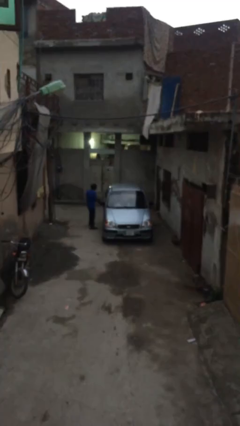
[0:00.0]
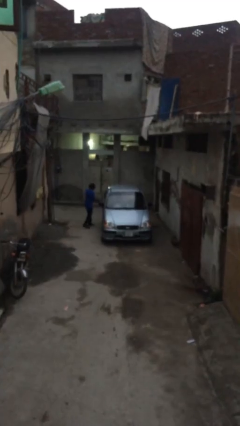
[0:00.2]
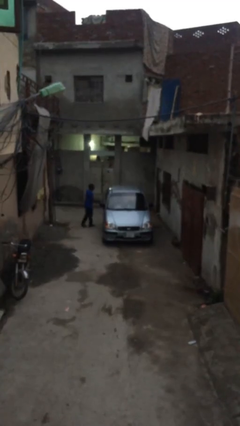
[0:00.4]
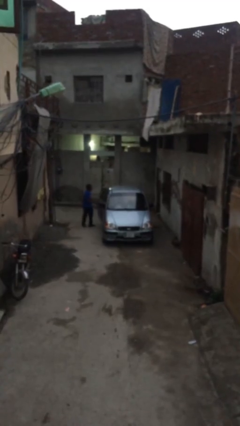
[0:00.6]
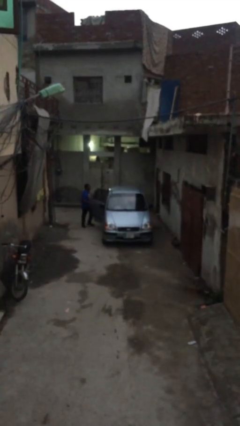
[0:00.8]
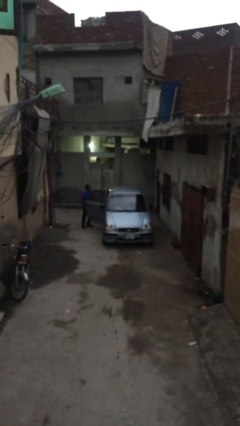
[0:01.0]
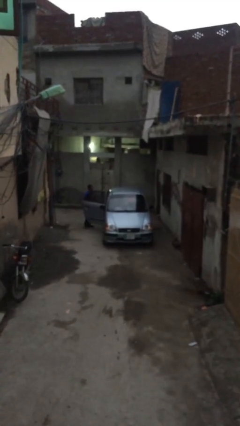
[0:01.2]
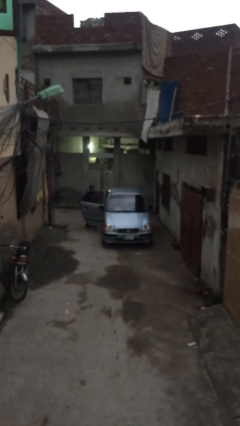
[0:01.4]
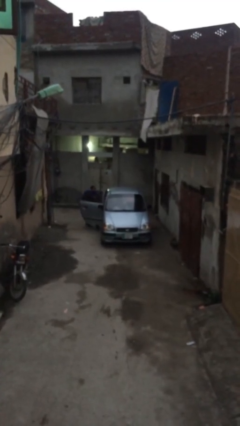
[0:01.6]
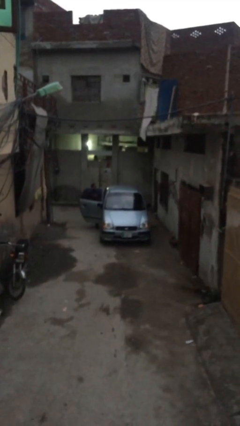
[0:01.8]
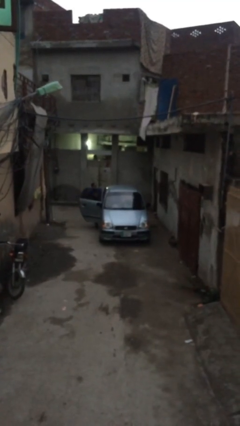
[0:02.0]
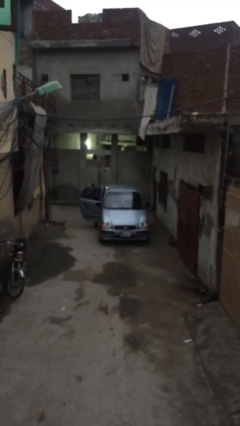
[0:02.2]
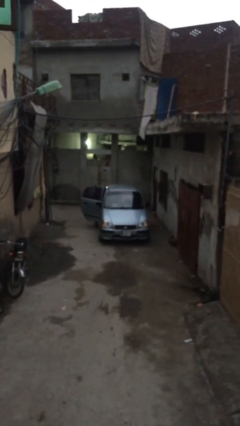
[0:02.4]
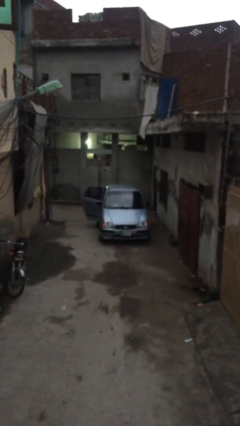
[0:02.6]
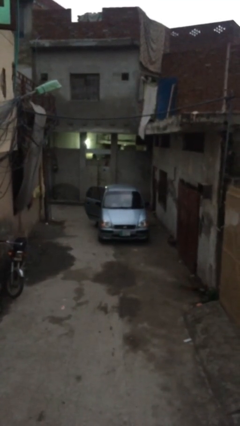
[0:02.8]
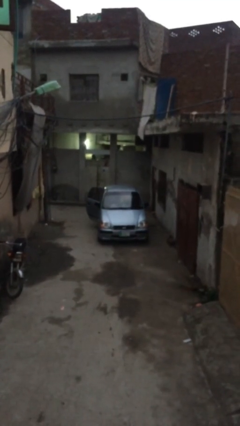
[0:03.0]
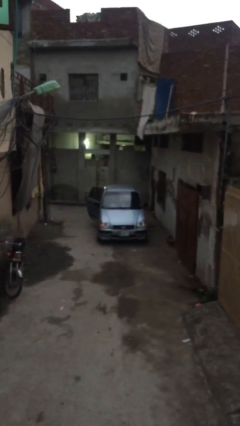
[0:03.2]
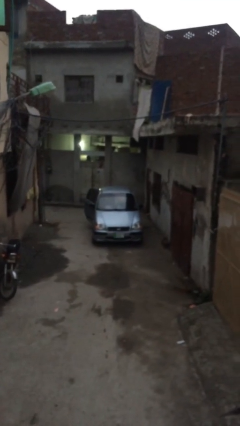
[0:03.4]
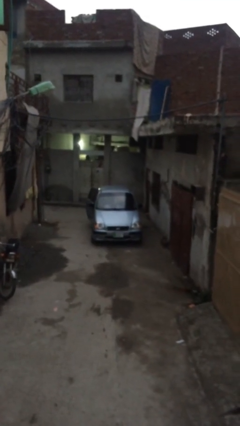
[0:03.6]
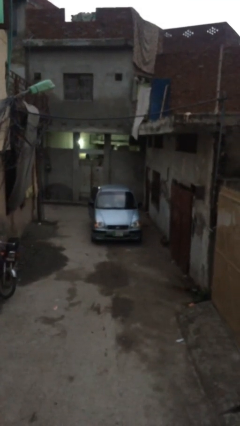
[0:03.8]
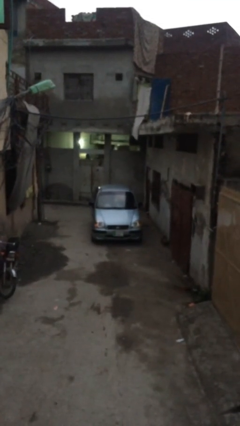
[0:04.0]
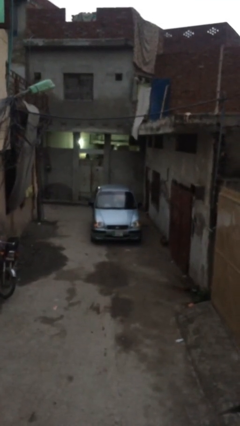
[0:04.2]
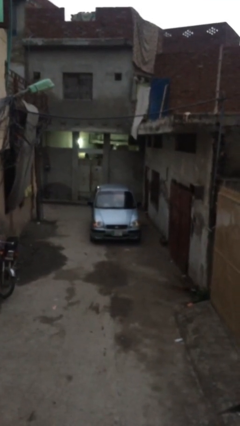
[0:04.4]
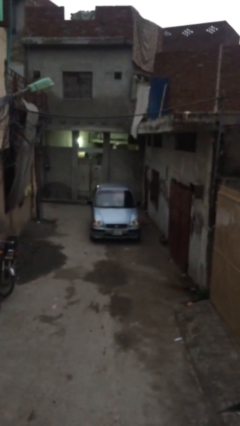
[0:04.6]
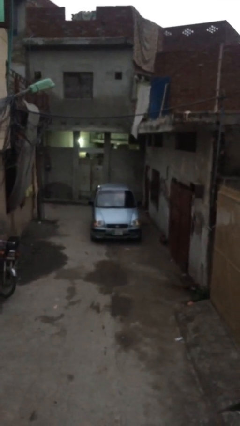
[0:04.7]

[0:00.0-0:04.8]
car picks up person

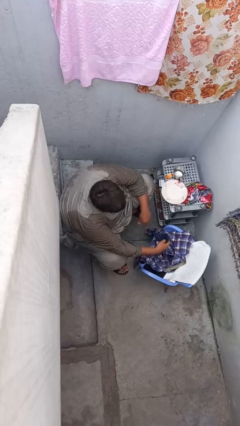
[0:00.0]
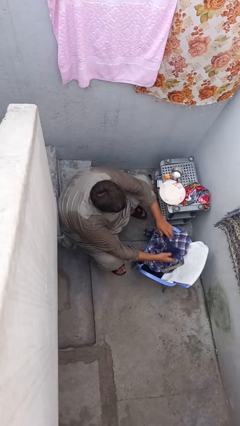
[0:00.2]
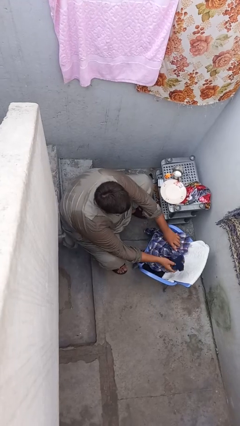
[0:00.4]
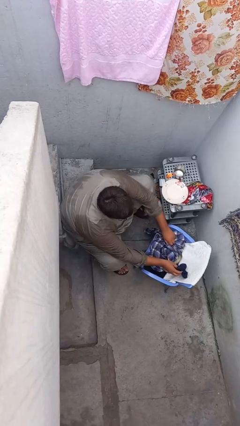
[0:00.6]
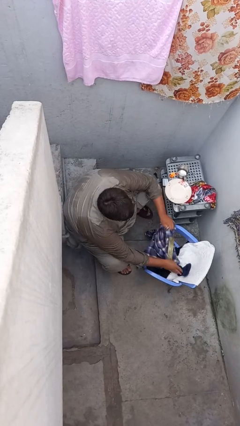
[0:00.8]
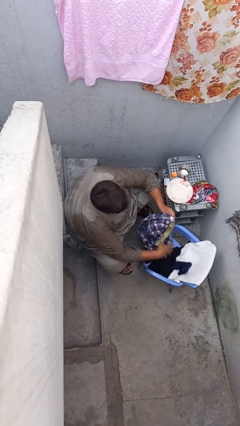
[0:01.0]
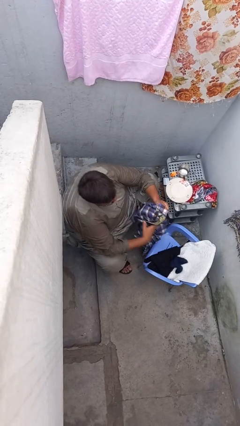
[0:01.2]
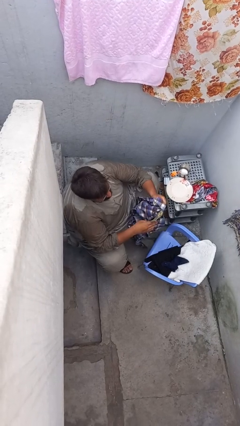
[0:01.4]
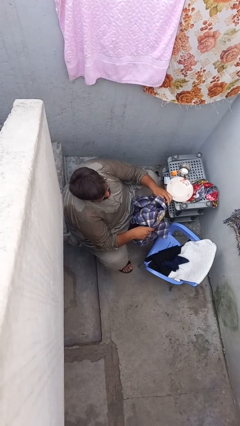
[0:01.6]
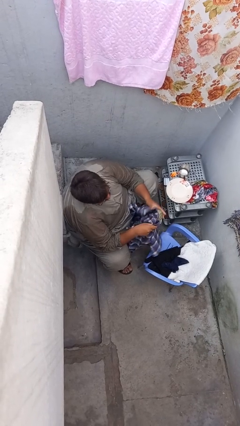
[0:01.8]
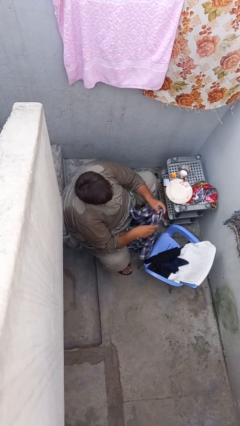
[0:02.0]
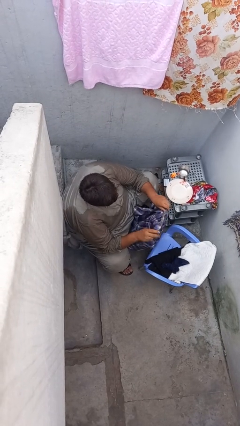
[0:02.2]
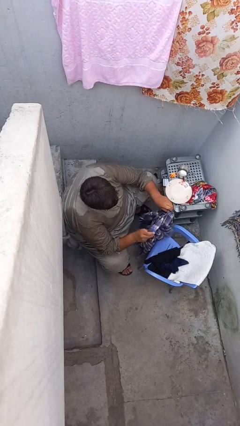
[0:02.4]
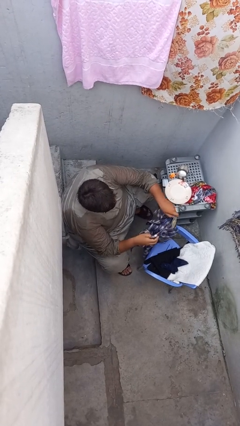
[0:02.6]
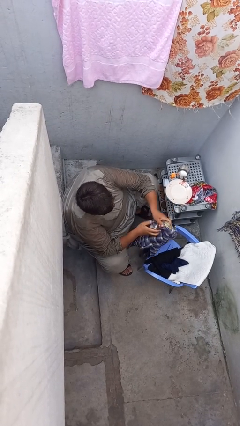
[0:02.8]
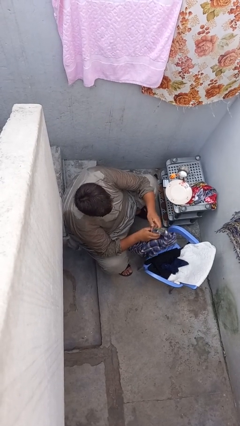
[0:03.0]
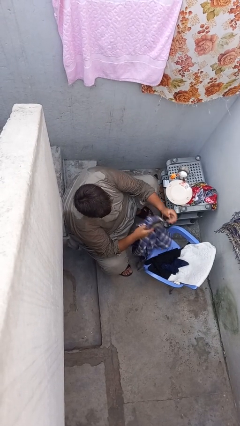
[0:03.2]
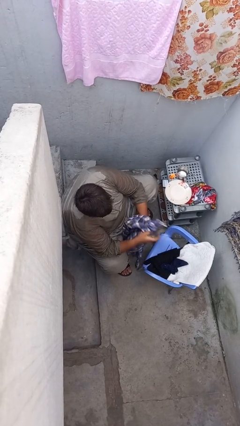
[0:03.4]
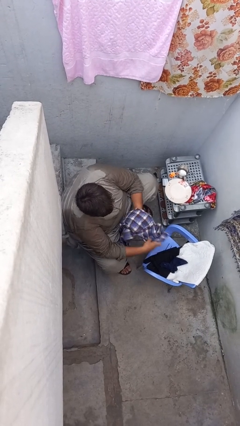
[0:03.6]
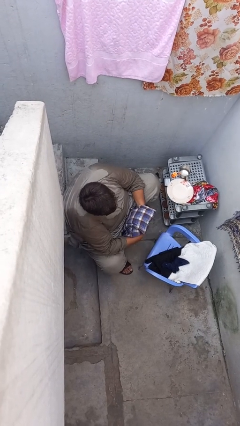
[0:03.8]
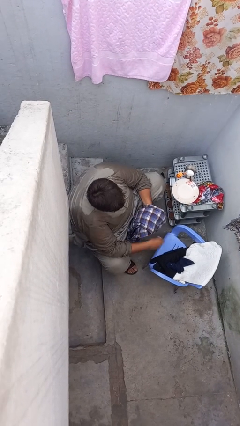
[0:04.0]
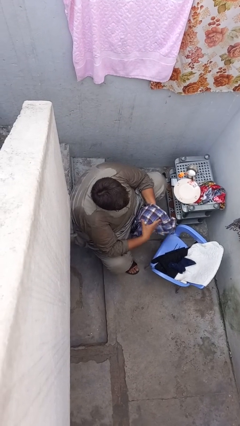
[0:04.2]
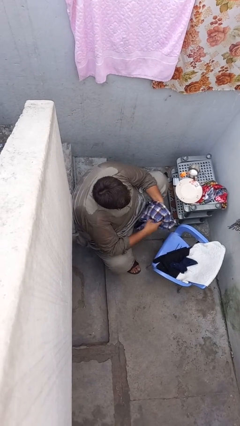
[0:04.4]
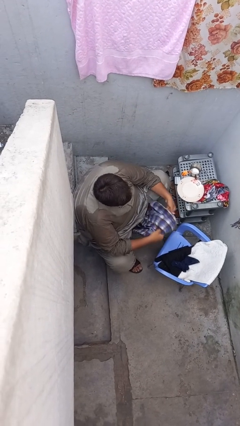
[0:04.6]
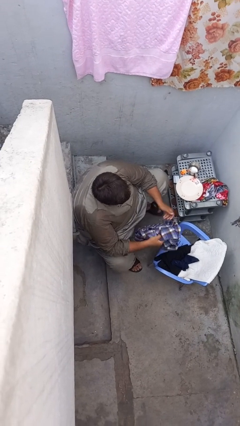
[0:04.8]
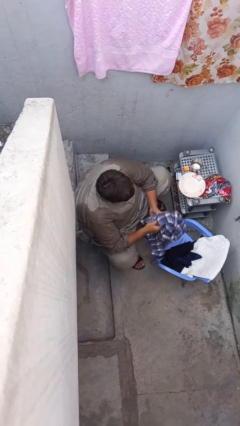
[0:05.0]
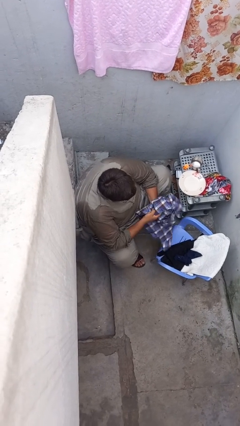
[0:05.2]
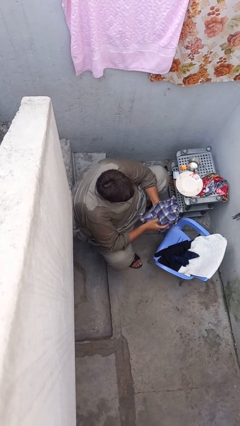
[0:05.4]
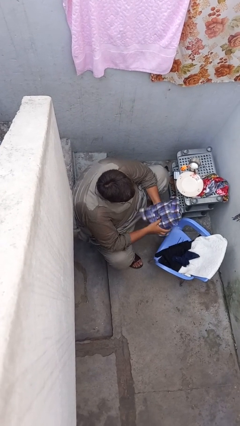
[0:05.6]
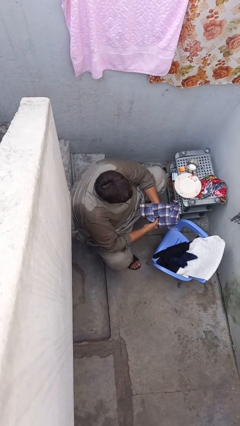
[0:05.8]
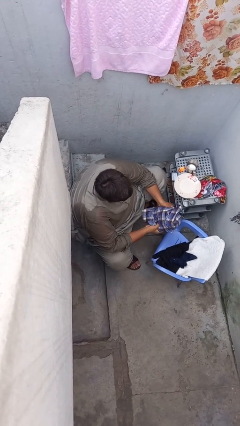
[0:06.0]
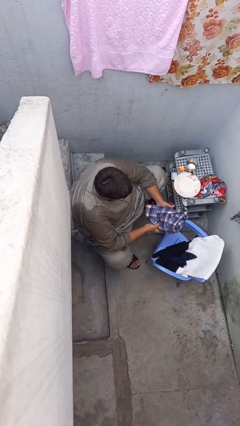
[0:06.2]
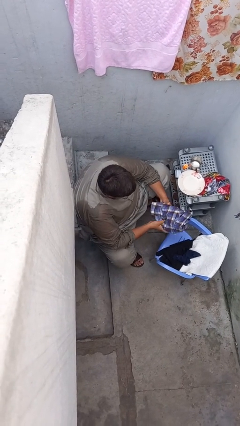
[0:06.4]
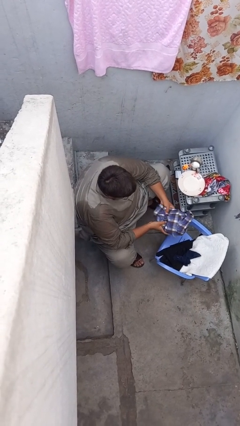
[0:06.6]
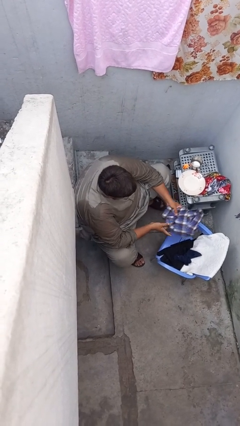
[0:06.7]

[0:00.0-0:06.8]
person folds shirt

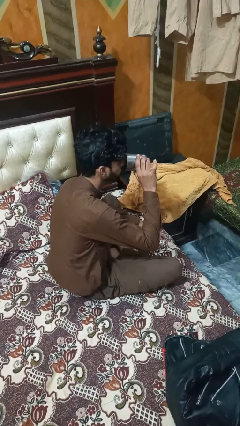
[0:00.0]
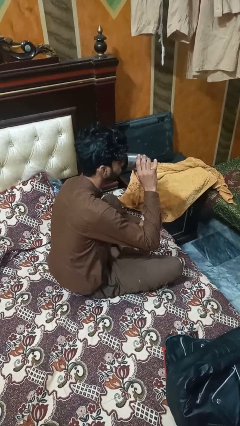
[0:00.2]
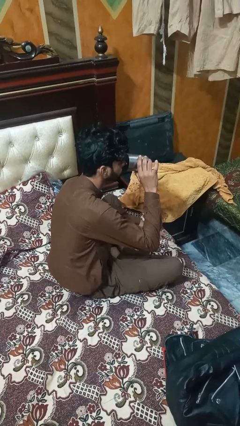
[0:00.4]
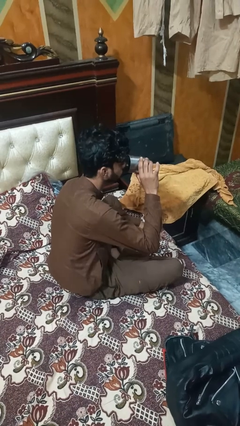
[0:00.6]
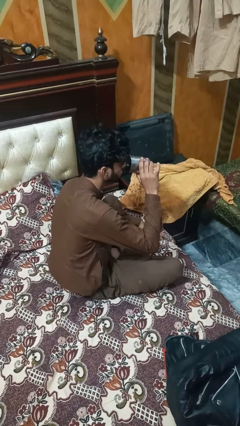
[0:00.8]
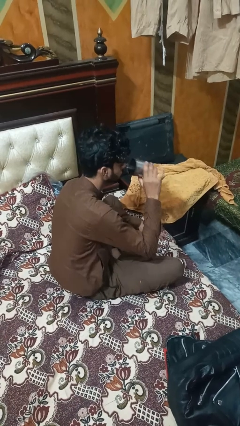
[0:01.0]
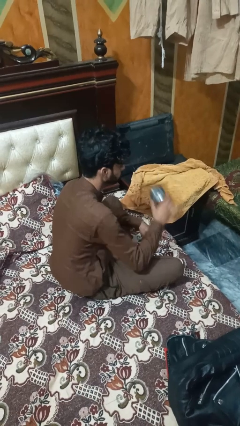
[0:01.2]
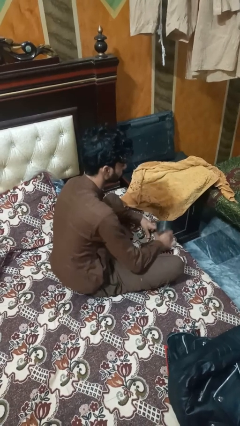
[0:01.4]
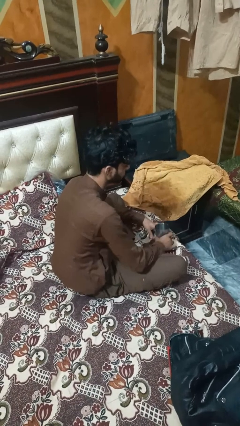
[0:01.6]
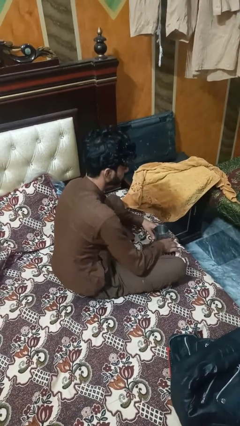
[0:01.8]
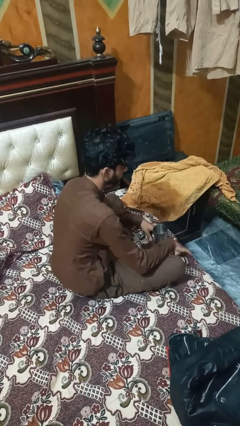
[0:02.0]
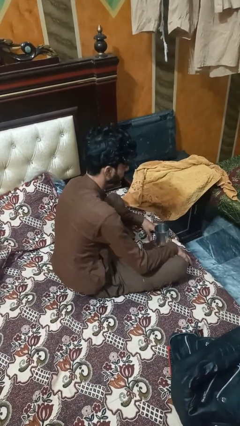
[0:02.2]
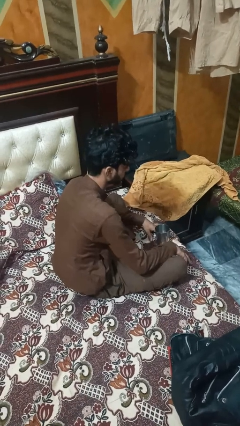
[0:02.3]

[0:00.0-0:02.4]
person puts down object on table

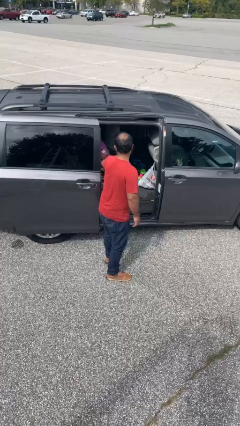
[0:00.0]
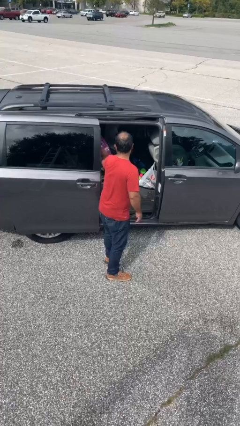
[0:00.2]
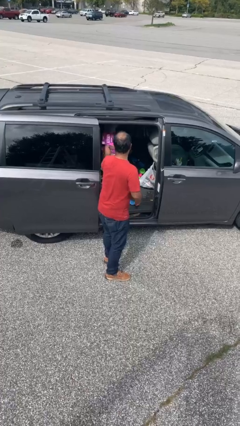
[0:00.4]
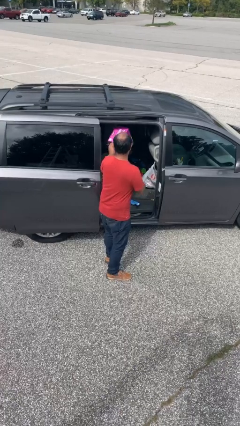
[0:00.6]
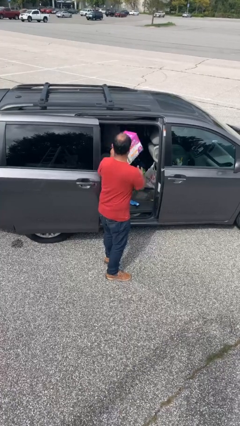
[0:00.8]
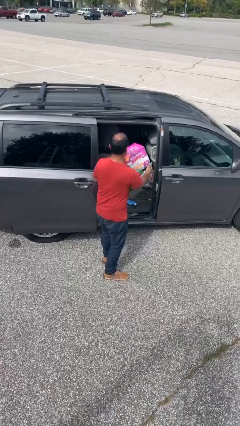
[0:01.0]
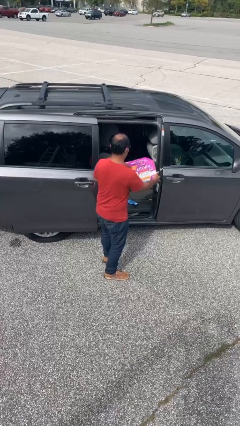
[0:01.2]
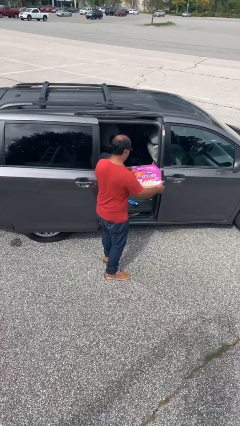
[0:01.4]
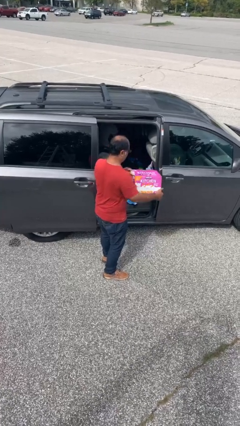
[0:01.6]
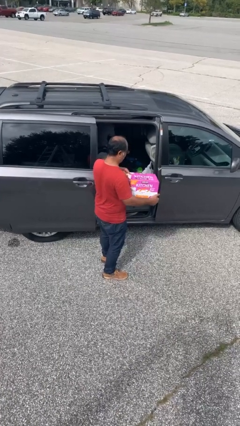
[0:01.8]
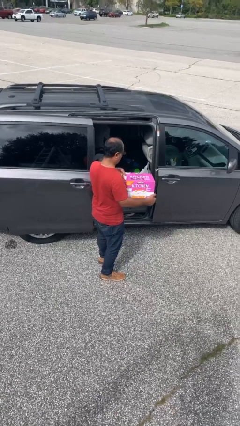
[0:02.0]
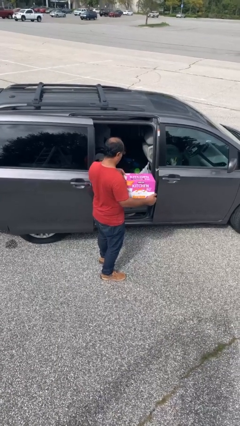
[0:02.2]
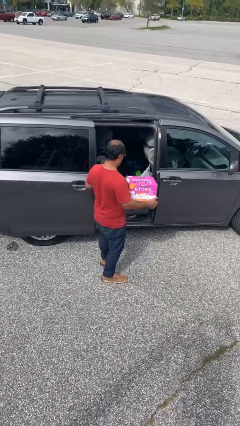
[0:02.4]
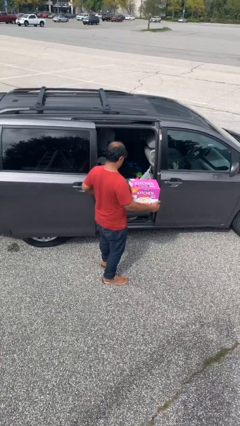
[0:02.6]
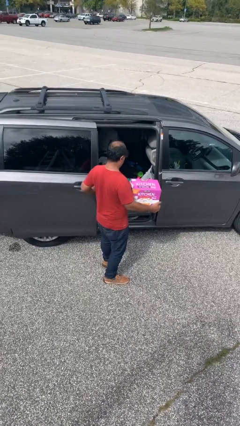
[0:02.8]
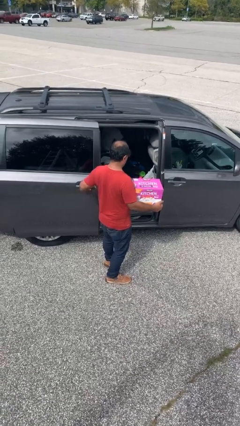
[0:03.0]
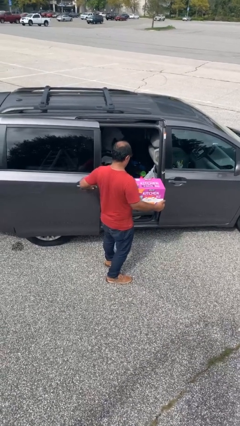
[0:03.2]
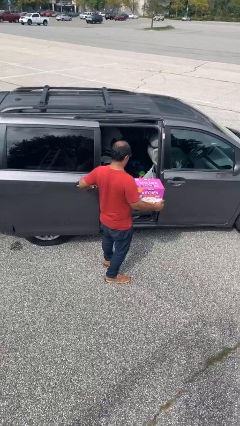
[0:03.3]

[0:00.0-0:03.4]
person unloads car
